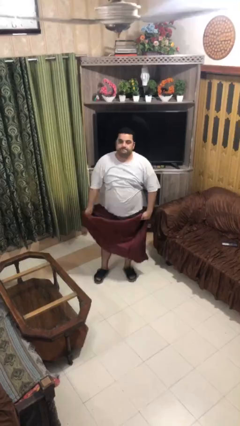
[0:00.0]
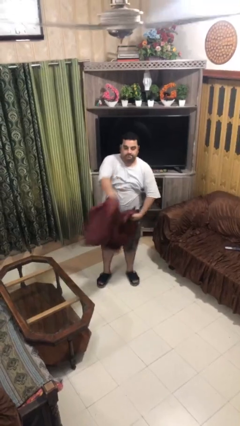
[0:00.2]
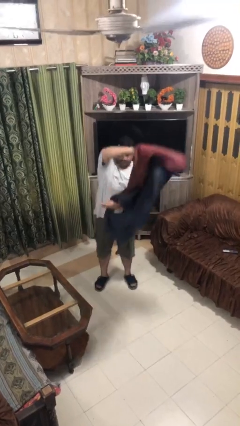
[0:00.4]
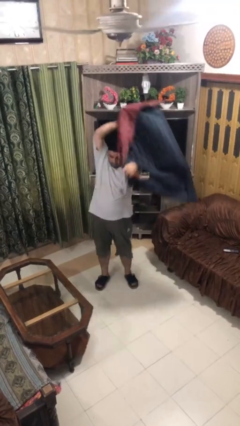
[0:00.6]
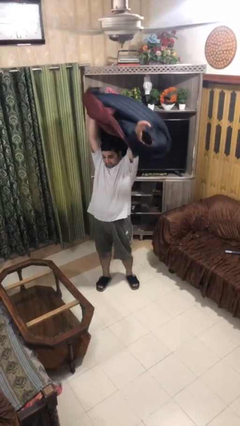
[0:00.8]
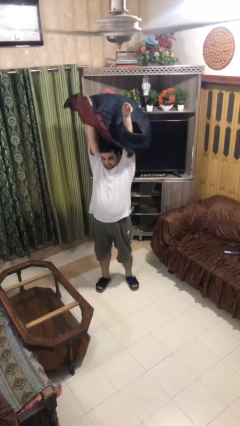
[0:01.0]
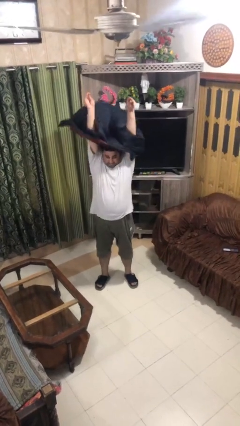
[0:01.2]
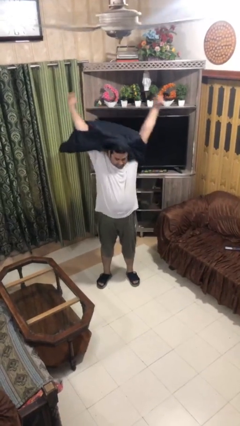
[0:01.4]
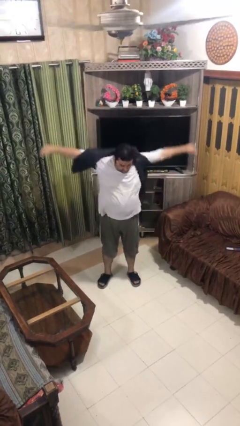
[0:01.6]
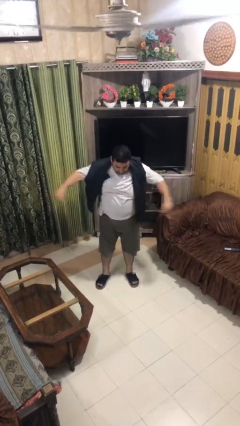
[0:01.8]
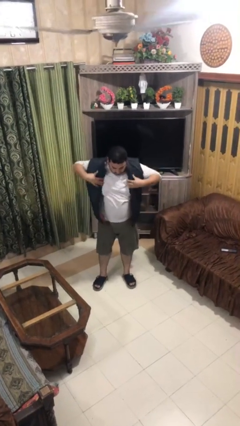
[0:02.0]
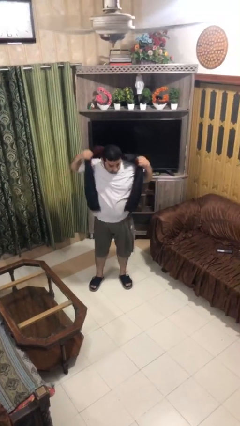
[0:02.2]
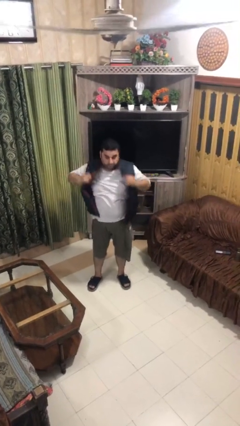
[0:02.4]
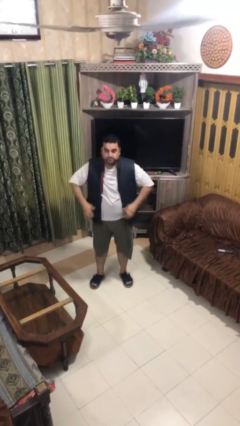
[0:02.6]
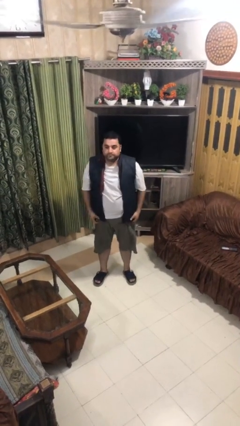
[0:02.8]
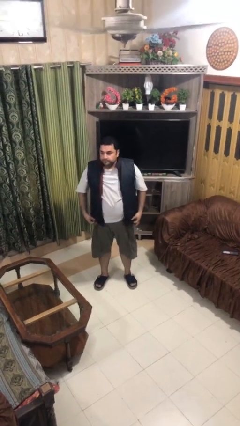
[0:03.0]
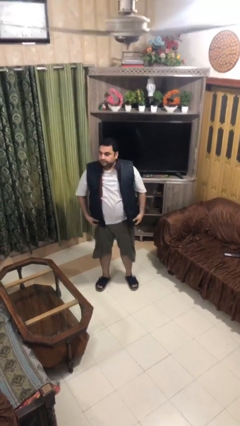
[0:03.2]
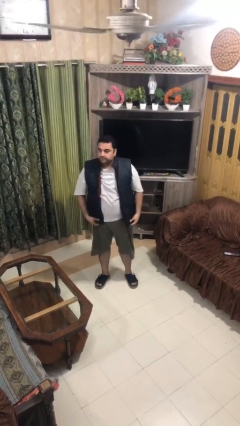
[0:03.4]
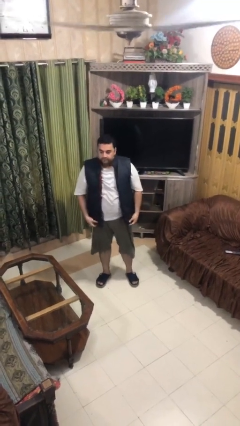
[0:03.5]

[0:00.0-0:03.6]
person puts on jacket

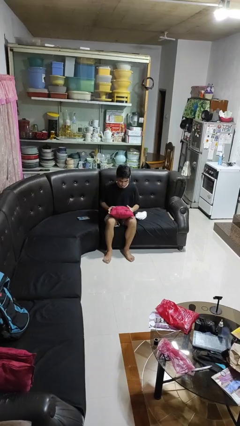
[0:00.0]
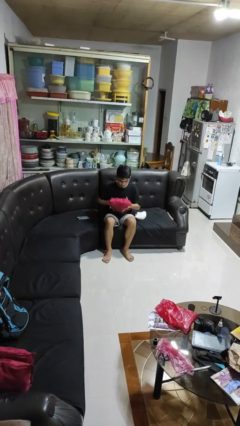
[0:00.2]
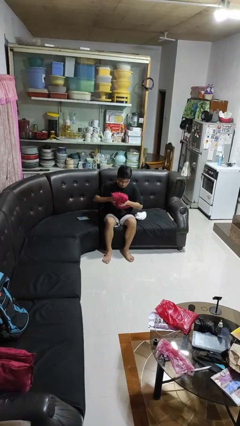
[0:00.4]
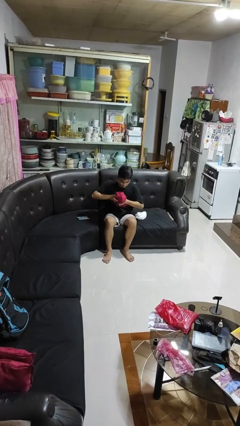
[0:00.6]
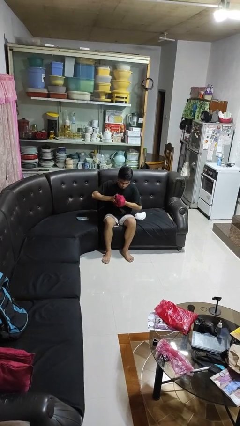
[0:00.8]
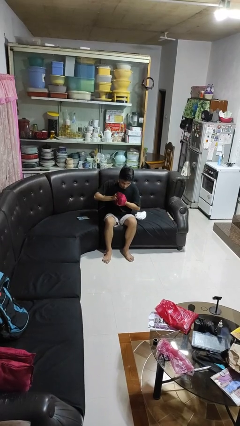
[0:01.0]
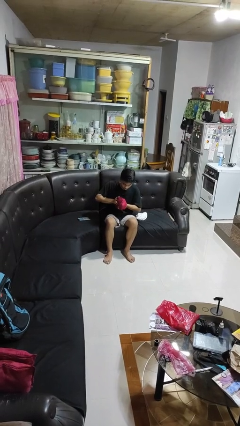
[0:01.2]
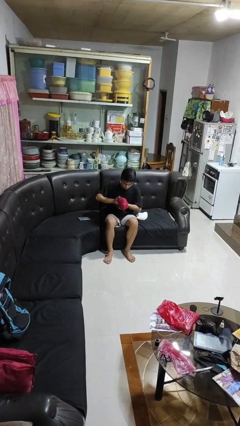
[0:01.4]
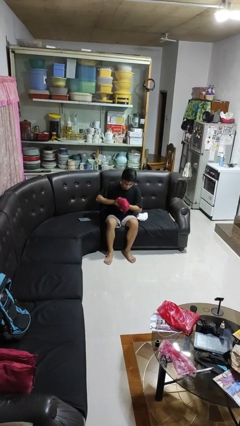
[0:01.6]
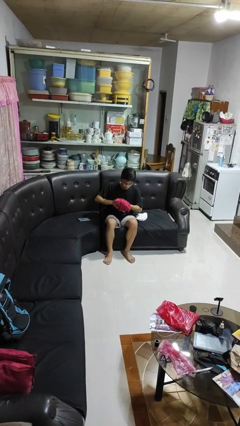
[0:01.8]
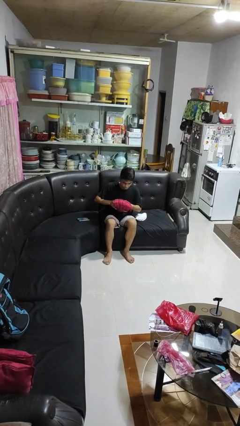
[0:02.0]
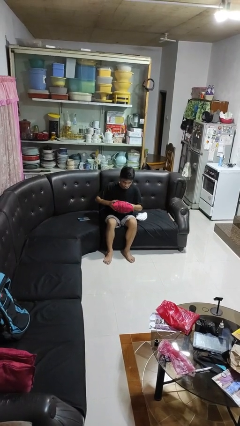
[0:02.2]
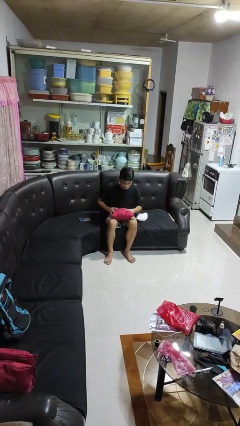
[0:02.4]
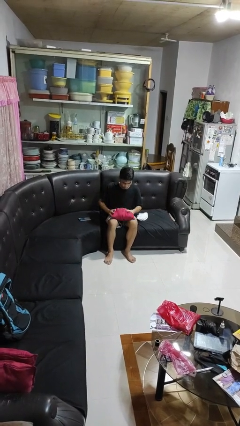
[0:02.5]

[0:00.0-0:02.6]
person squeezes object

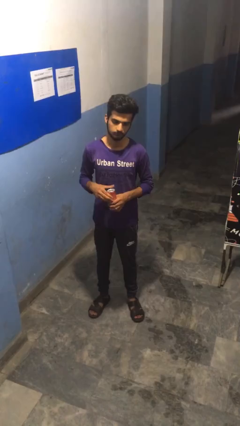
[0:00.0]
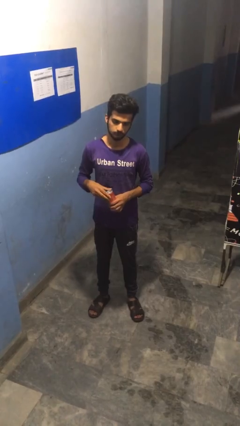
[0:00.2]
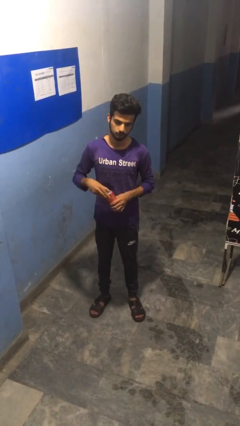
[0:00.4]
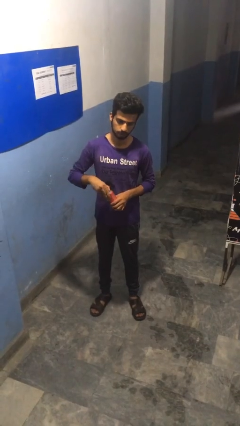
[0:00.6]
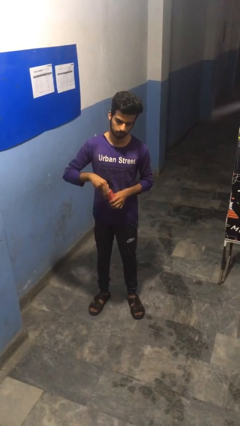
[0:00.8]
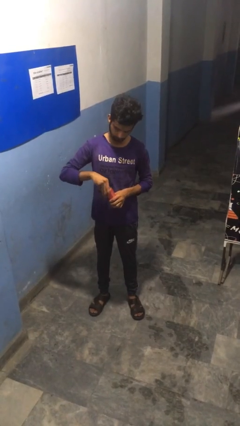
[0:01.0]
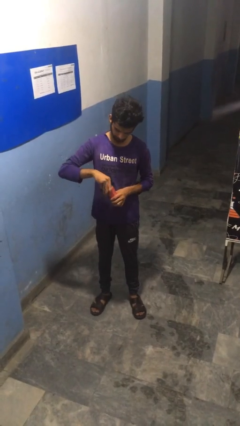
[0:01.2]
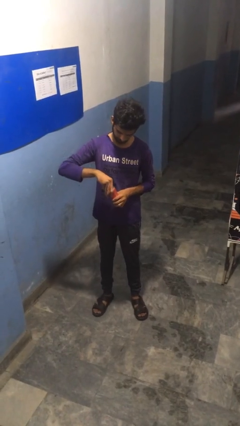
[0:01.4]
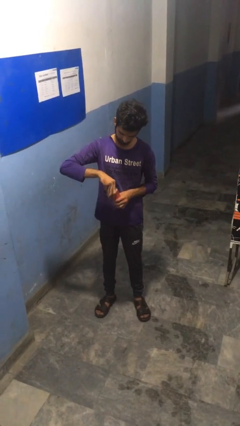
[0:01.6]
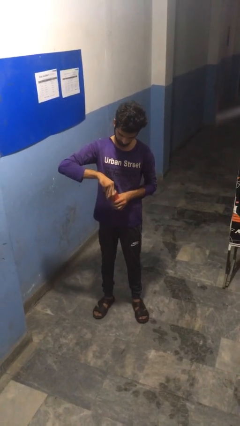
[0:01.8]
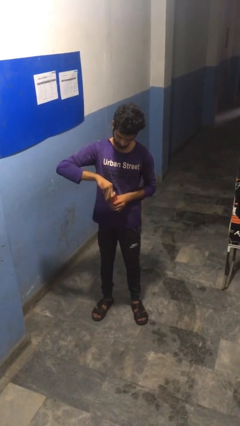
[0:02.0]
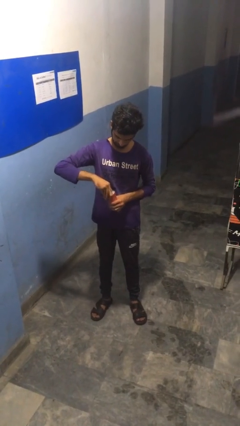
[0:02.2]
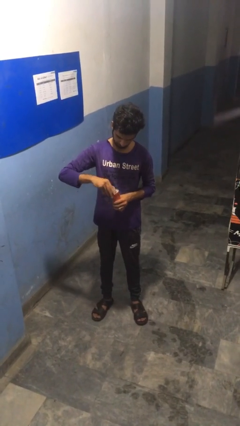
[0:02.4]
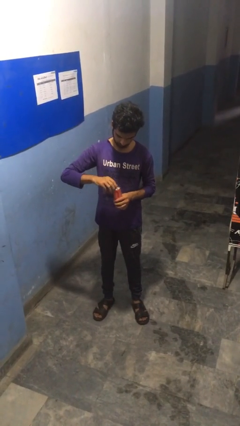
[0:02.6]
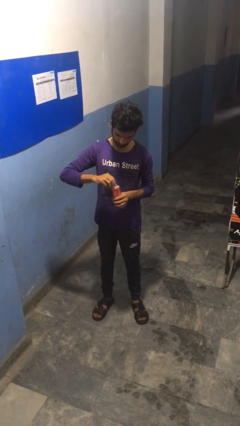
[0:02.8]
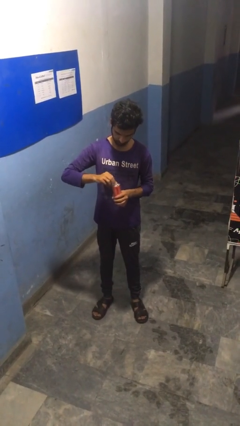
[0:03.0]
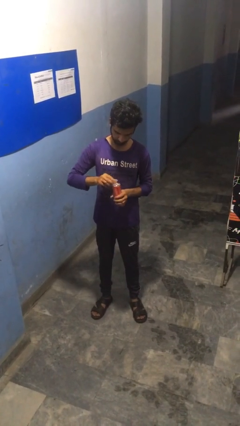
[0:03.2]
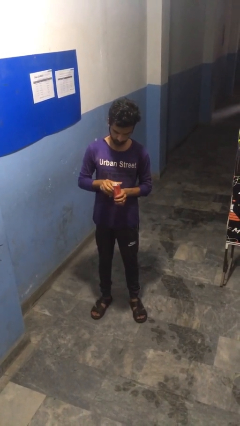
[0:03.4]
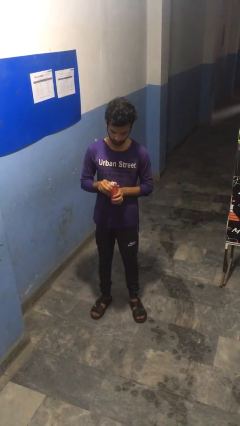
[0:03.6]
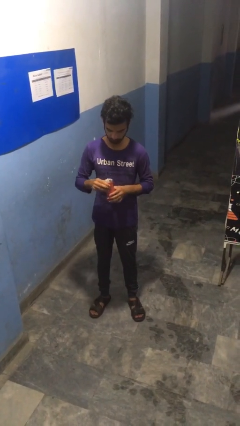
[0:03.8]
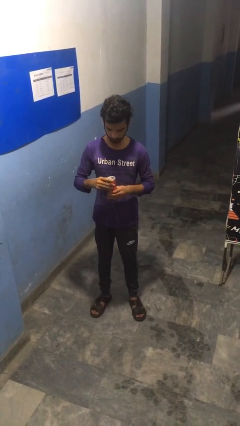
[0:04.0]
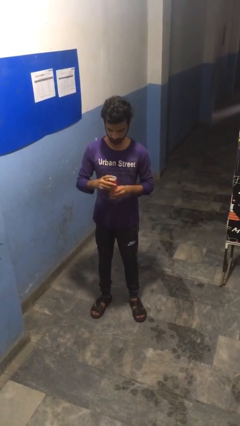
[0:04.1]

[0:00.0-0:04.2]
person opens beverage can

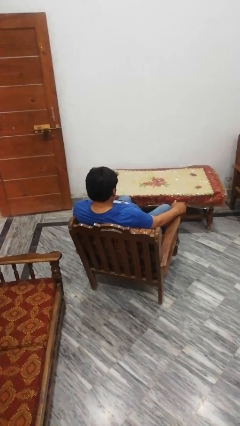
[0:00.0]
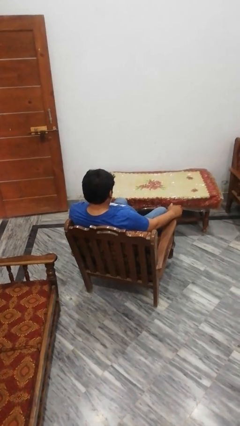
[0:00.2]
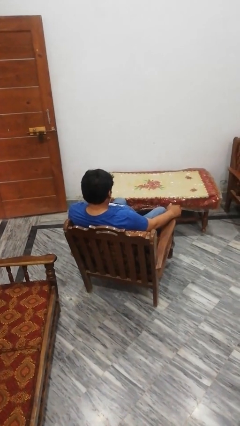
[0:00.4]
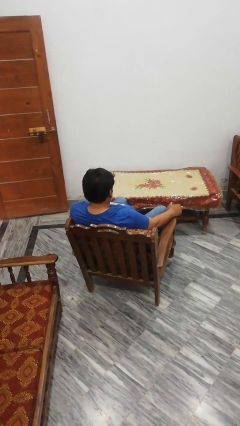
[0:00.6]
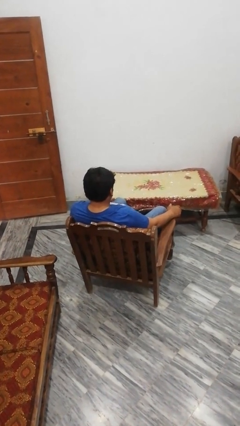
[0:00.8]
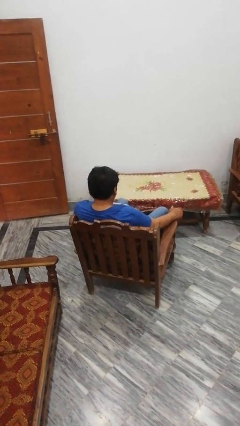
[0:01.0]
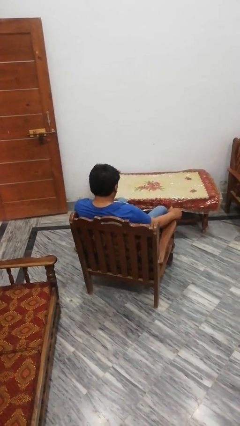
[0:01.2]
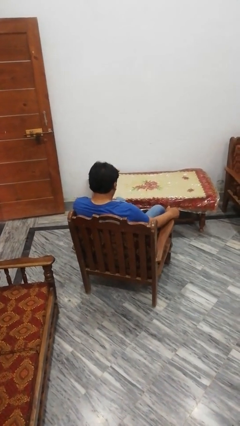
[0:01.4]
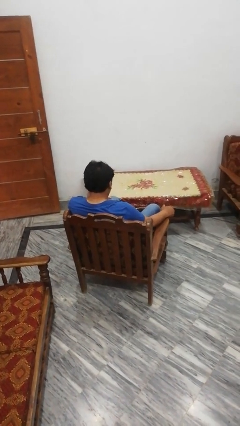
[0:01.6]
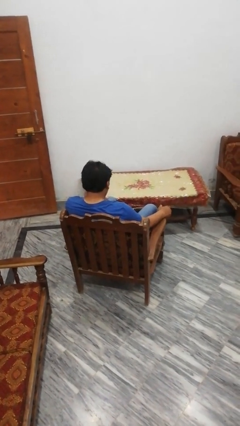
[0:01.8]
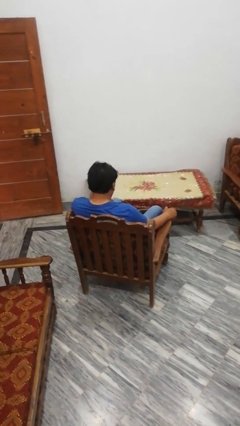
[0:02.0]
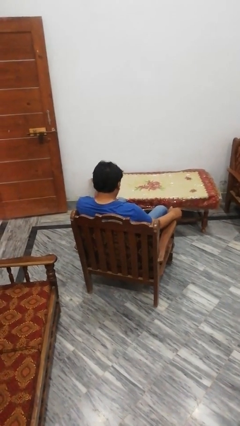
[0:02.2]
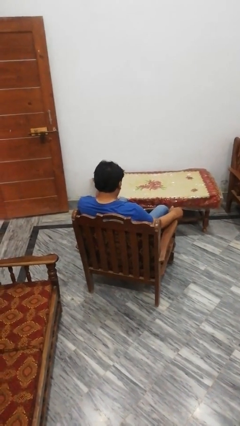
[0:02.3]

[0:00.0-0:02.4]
person pushes in chair

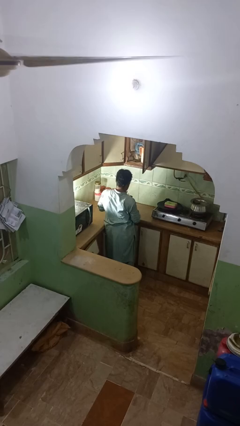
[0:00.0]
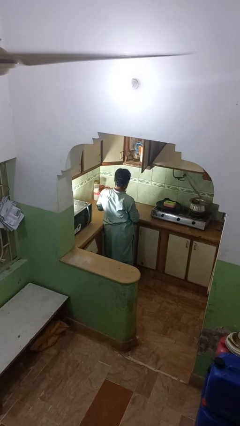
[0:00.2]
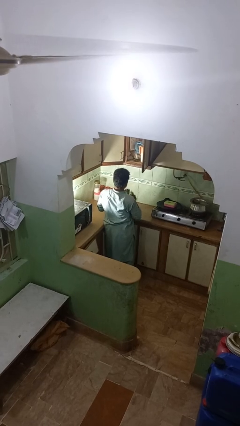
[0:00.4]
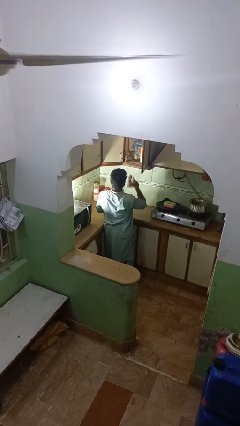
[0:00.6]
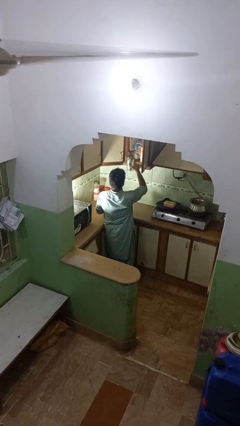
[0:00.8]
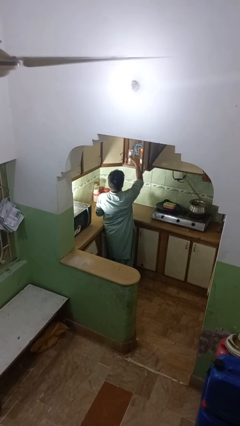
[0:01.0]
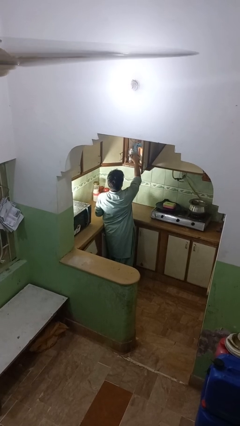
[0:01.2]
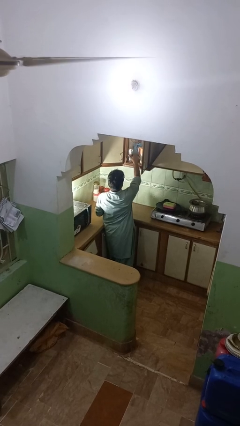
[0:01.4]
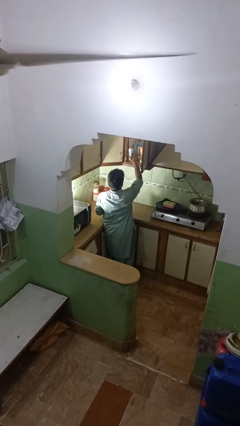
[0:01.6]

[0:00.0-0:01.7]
person puts object into kitchen drawer

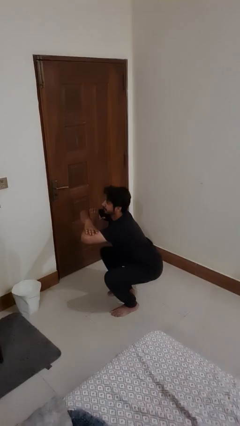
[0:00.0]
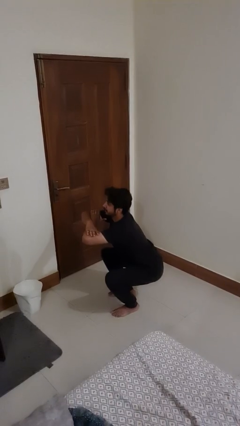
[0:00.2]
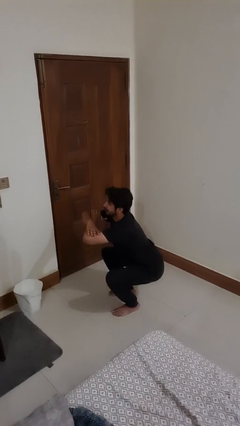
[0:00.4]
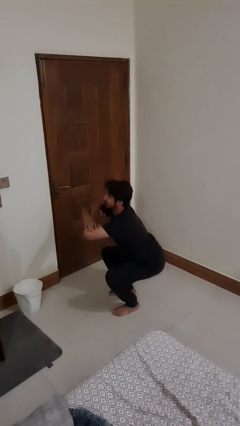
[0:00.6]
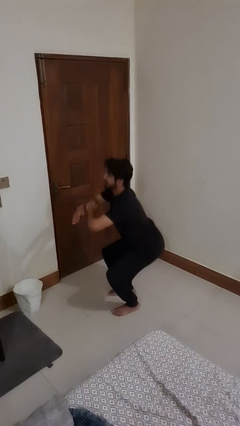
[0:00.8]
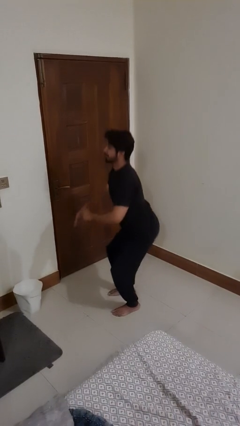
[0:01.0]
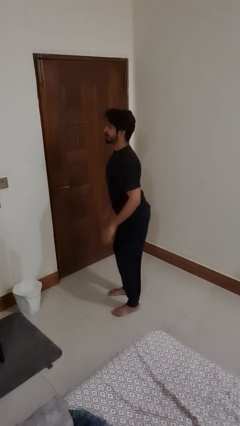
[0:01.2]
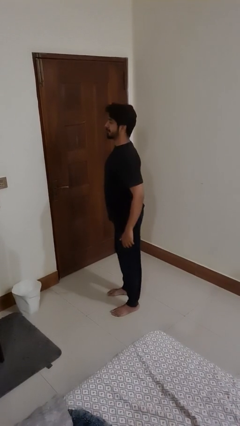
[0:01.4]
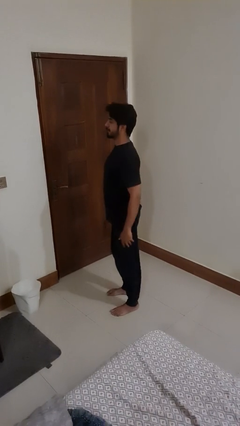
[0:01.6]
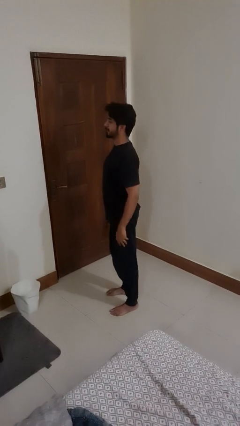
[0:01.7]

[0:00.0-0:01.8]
person stands up

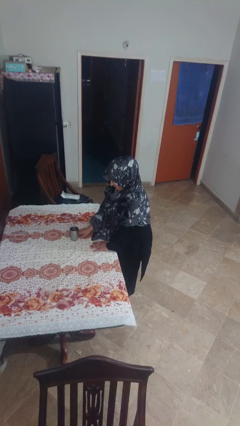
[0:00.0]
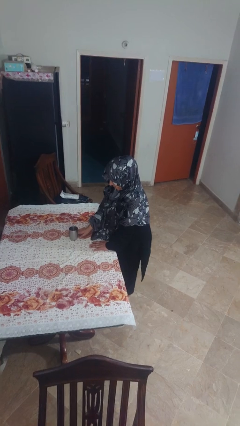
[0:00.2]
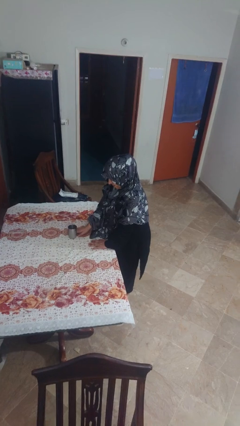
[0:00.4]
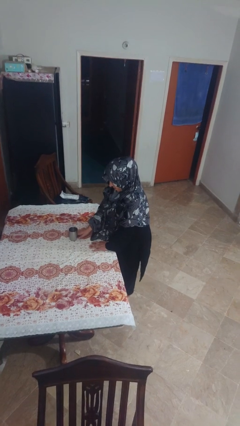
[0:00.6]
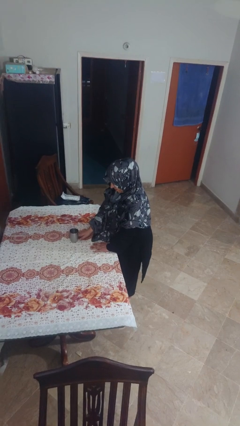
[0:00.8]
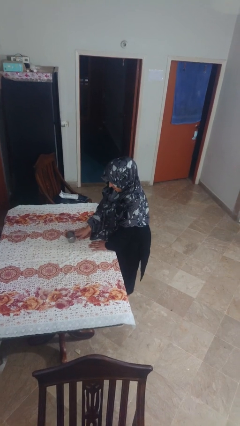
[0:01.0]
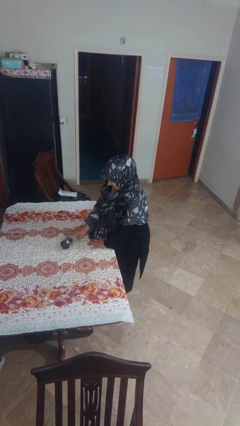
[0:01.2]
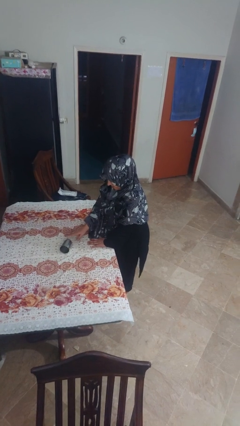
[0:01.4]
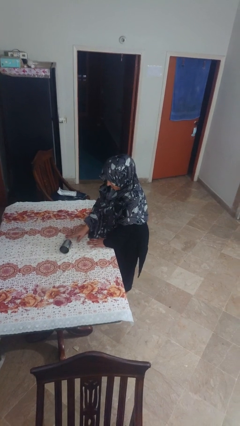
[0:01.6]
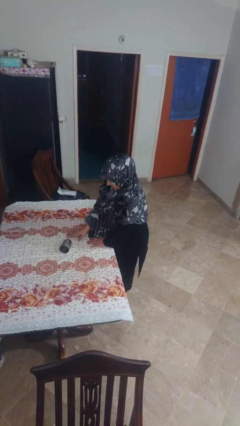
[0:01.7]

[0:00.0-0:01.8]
person knocks over glass
